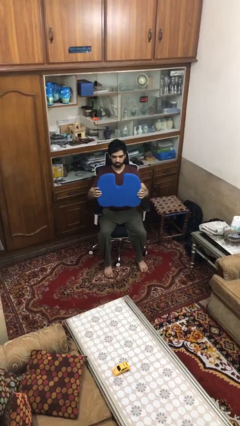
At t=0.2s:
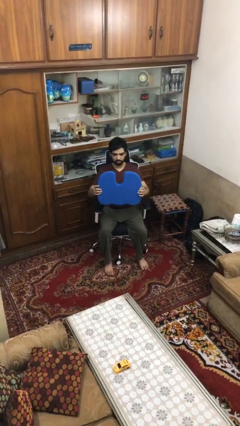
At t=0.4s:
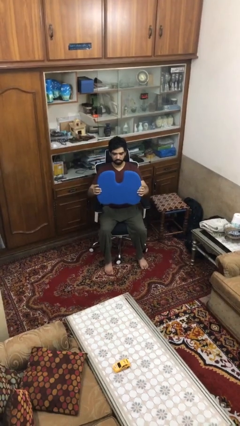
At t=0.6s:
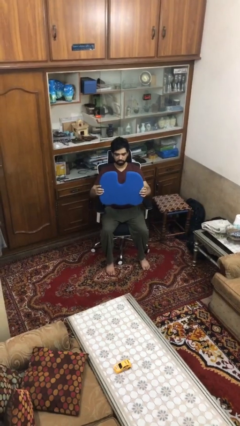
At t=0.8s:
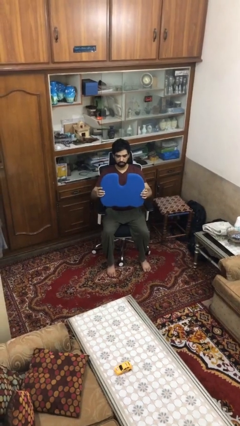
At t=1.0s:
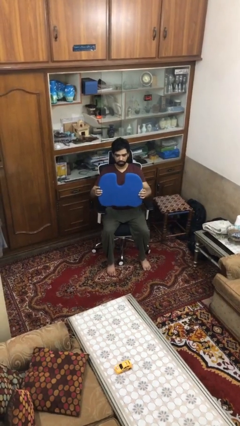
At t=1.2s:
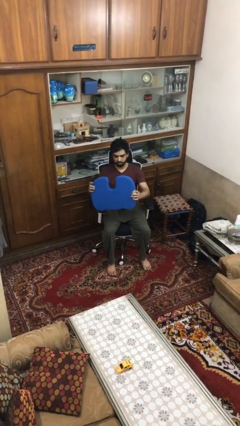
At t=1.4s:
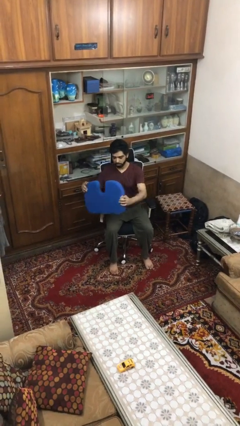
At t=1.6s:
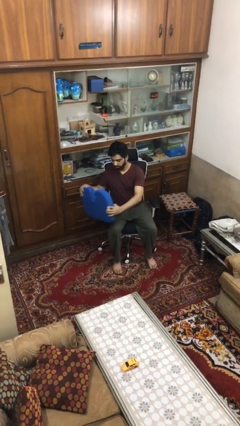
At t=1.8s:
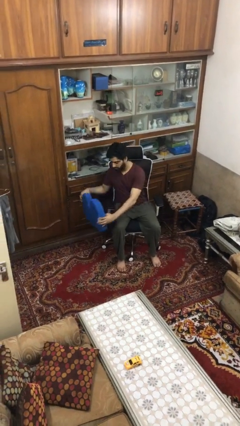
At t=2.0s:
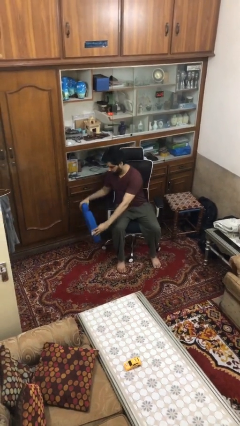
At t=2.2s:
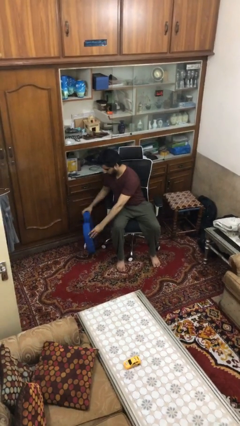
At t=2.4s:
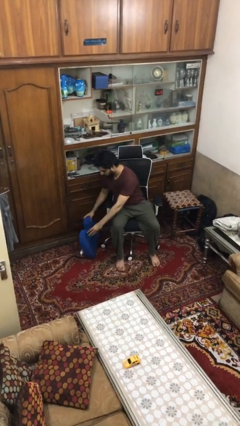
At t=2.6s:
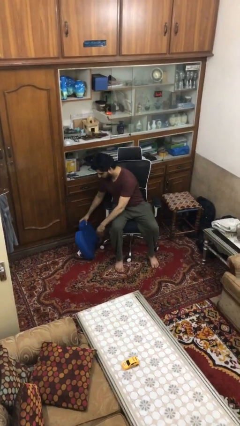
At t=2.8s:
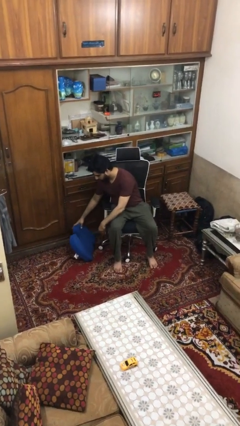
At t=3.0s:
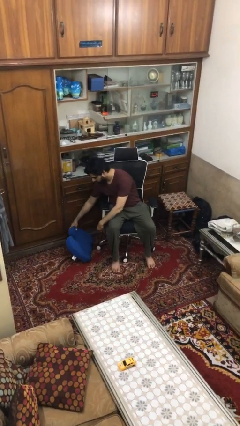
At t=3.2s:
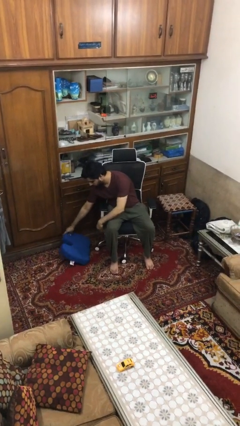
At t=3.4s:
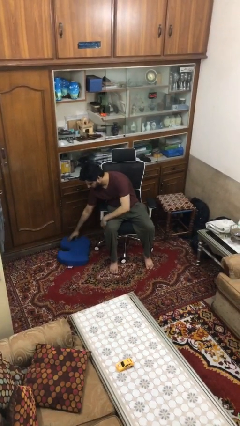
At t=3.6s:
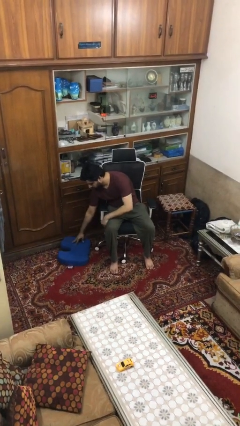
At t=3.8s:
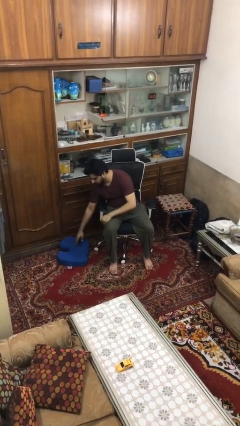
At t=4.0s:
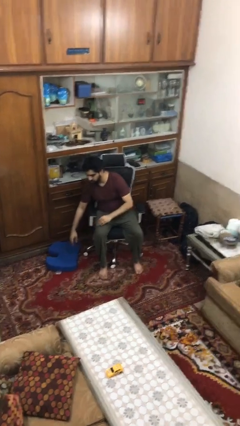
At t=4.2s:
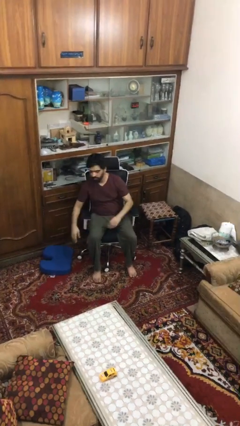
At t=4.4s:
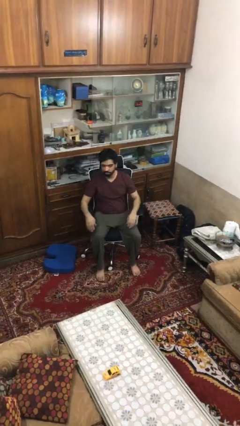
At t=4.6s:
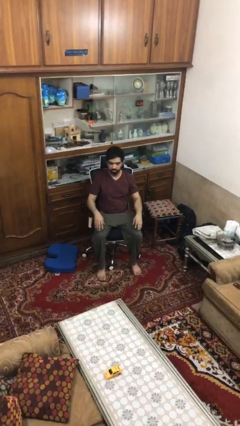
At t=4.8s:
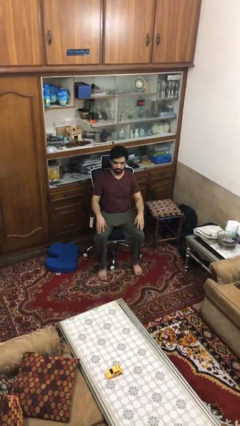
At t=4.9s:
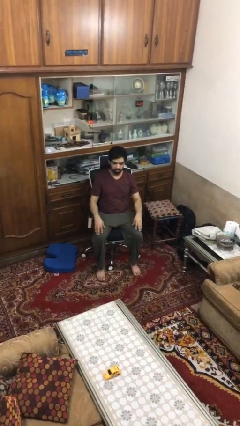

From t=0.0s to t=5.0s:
person puts down object on floor

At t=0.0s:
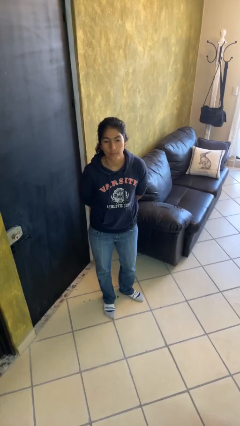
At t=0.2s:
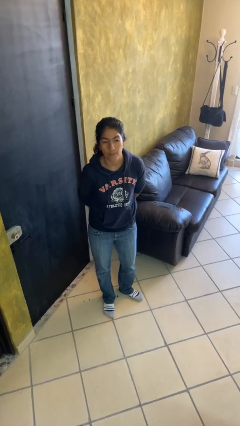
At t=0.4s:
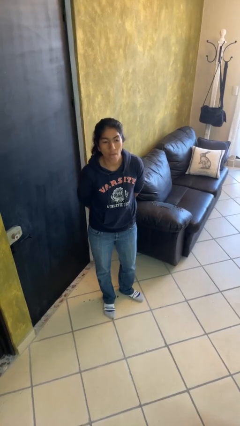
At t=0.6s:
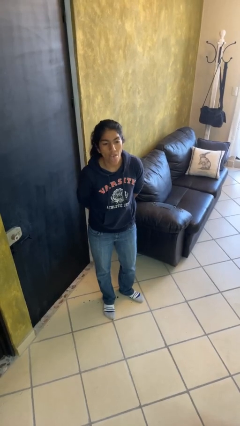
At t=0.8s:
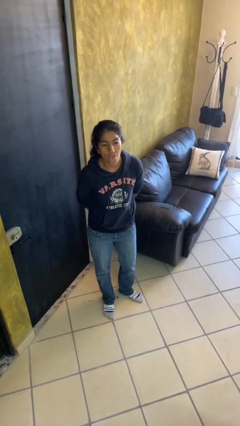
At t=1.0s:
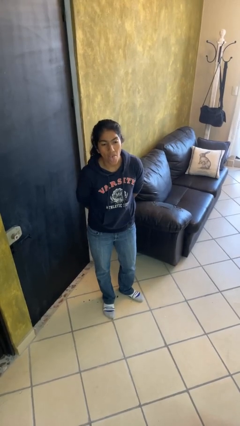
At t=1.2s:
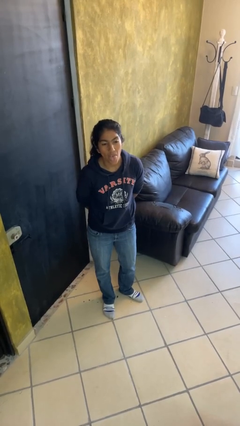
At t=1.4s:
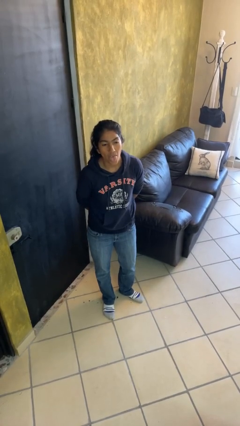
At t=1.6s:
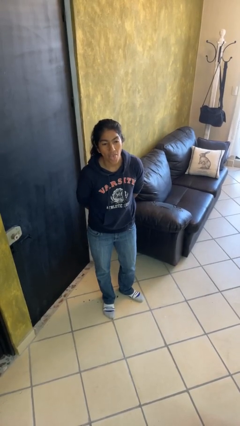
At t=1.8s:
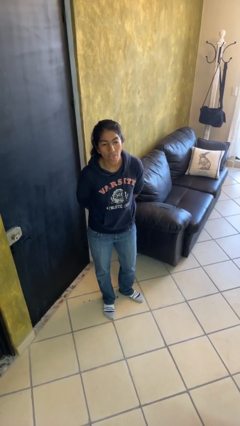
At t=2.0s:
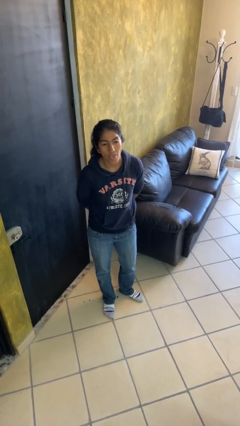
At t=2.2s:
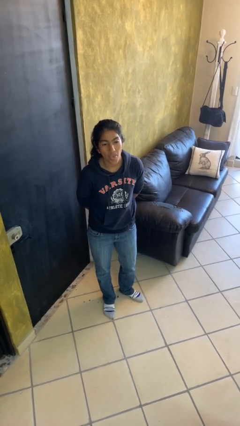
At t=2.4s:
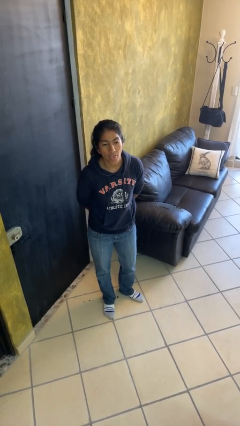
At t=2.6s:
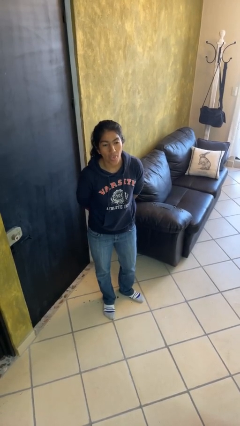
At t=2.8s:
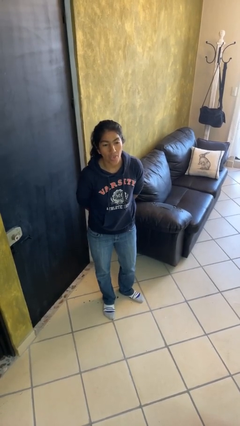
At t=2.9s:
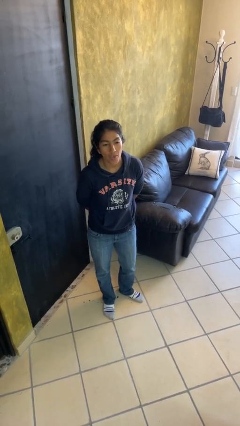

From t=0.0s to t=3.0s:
person sticks out tongue

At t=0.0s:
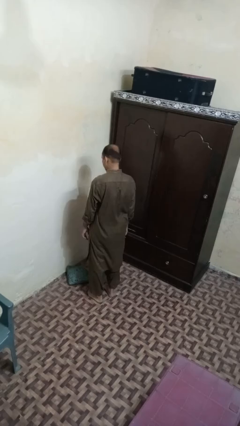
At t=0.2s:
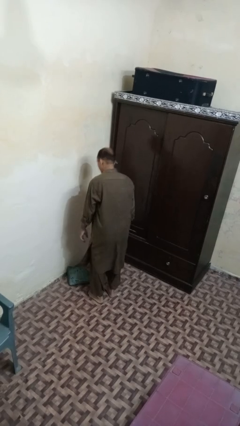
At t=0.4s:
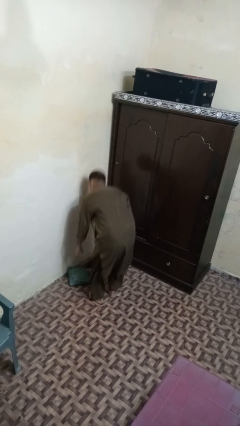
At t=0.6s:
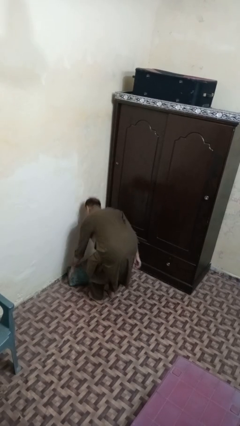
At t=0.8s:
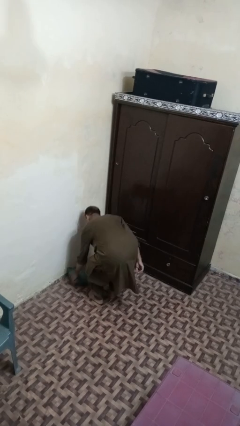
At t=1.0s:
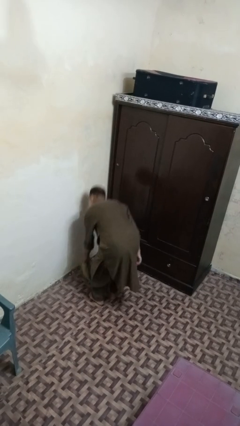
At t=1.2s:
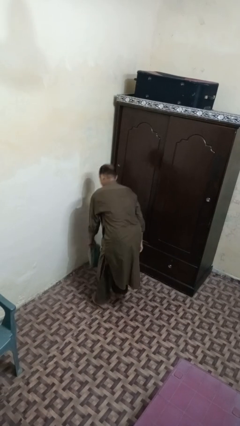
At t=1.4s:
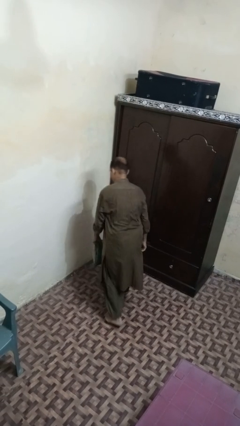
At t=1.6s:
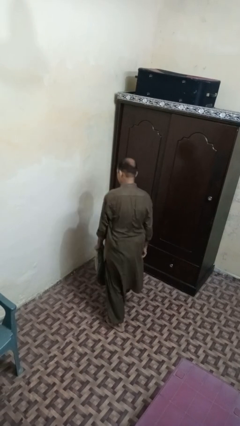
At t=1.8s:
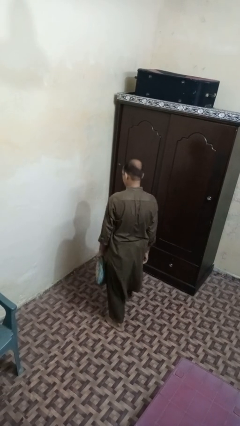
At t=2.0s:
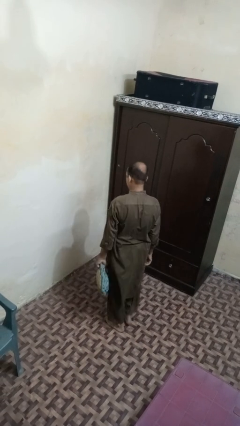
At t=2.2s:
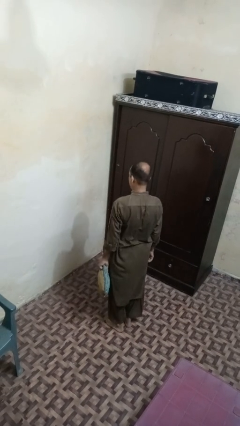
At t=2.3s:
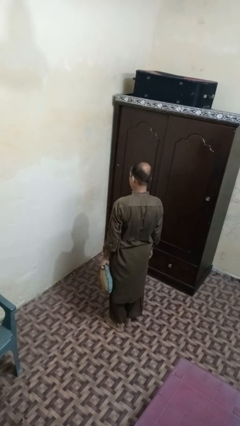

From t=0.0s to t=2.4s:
person picks up object from floor

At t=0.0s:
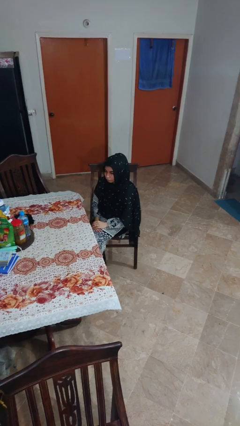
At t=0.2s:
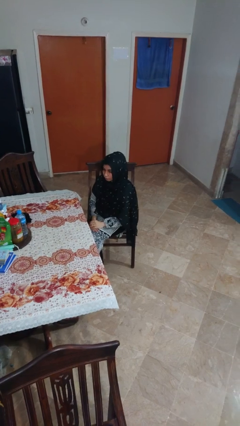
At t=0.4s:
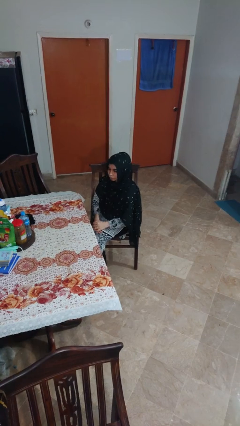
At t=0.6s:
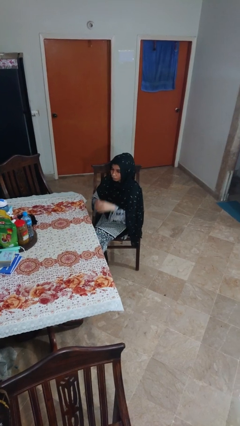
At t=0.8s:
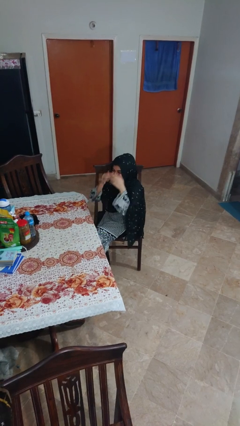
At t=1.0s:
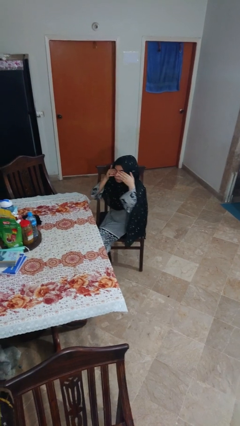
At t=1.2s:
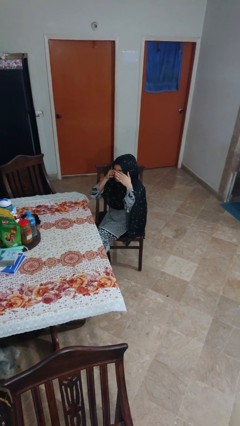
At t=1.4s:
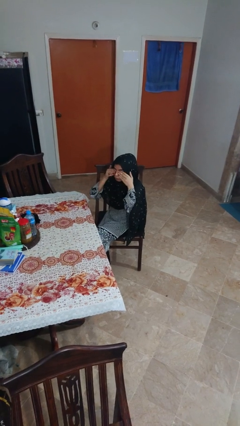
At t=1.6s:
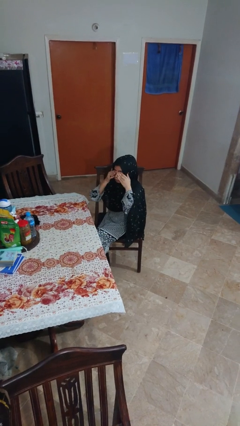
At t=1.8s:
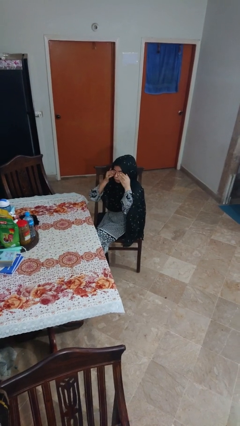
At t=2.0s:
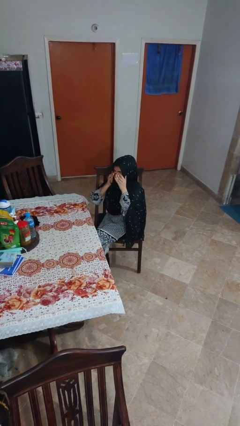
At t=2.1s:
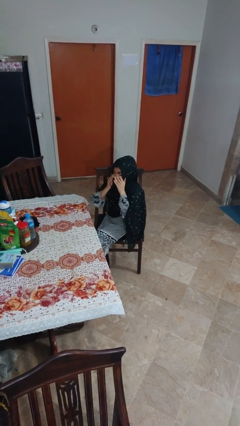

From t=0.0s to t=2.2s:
person rubs eyes

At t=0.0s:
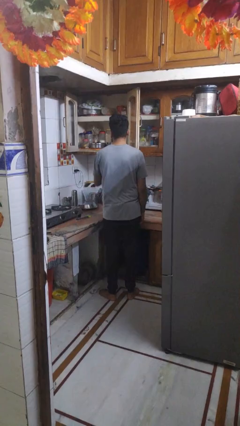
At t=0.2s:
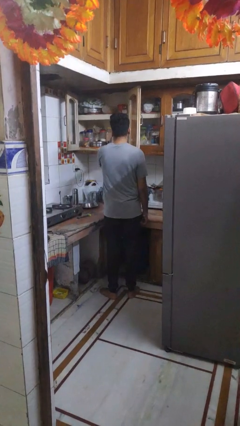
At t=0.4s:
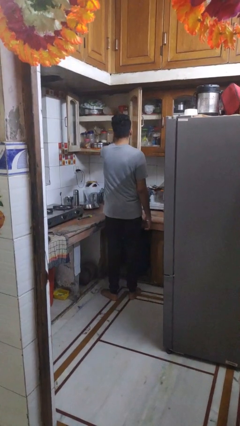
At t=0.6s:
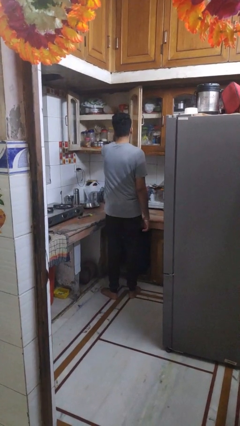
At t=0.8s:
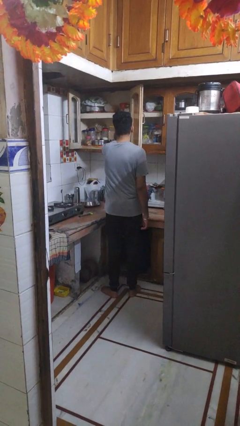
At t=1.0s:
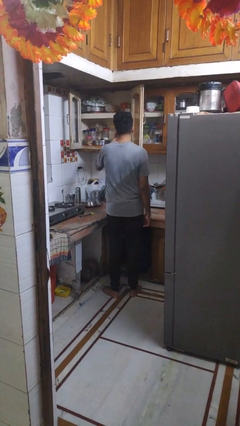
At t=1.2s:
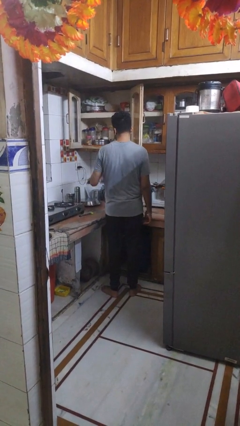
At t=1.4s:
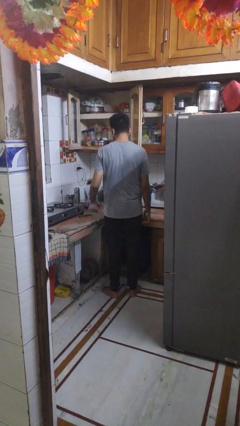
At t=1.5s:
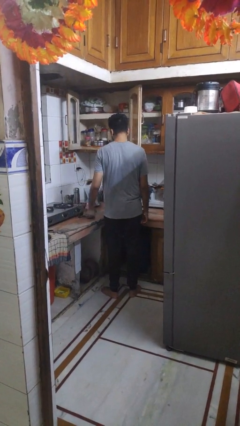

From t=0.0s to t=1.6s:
person takes object from cabinet

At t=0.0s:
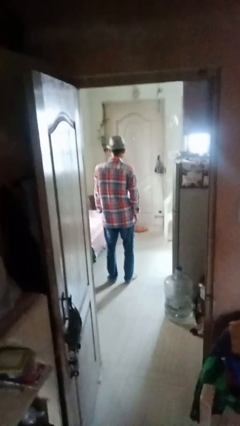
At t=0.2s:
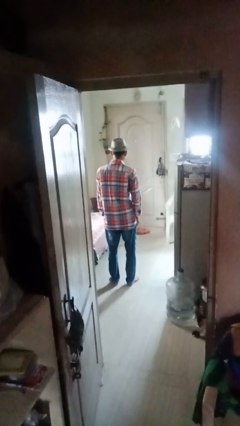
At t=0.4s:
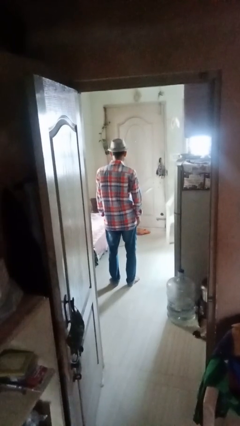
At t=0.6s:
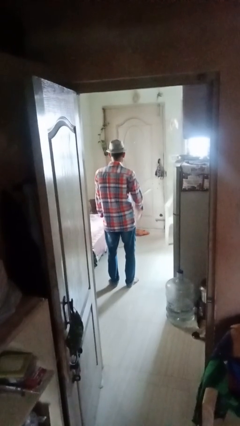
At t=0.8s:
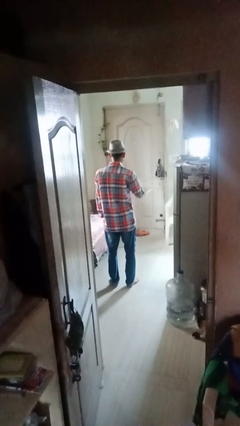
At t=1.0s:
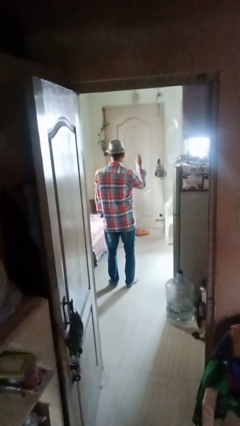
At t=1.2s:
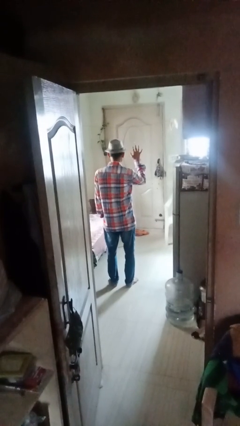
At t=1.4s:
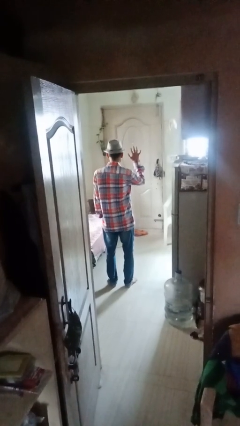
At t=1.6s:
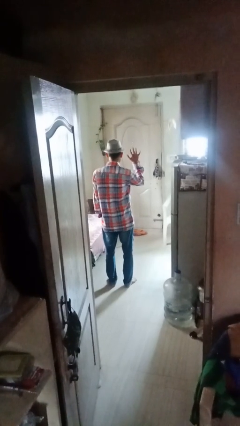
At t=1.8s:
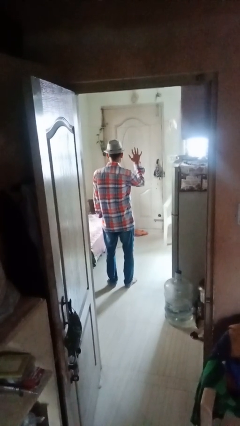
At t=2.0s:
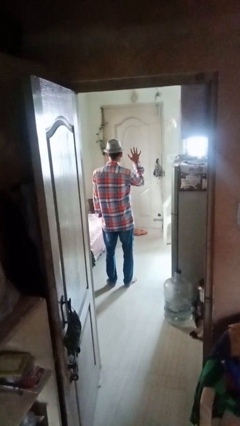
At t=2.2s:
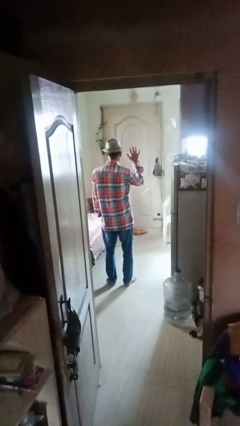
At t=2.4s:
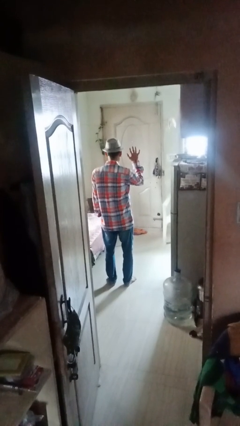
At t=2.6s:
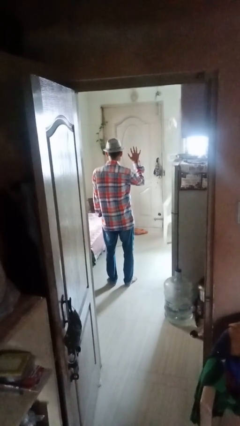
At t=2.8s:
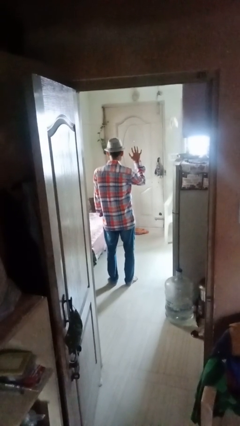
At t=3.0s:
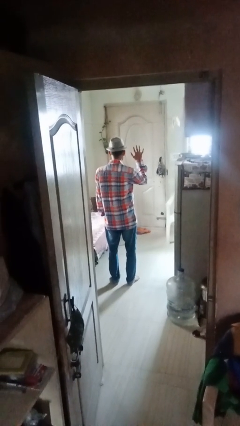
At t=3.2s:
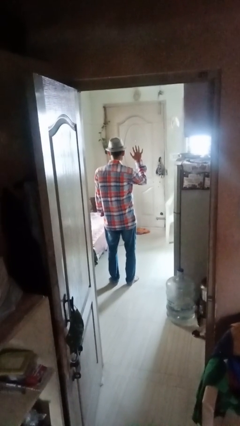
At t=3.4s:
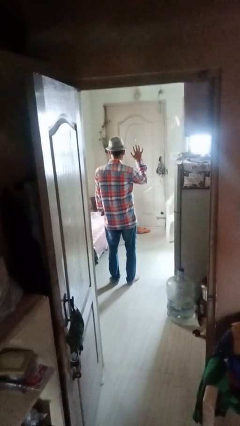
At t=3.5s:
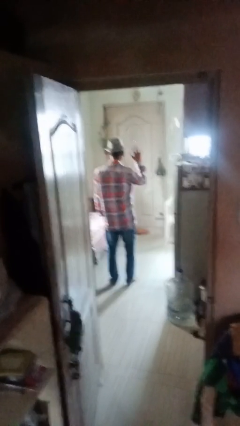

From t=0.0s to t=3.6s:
person gestures number five
